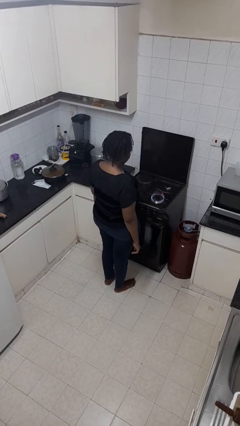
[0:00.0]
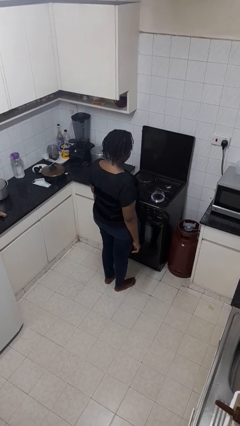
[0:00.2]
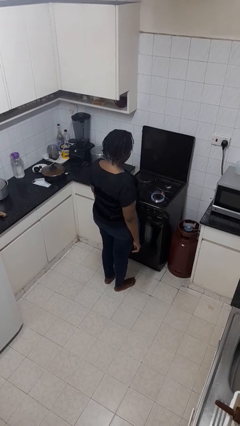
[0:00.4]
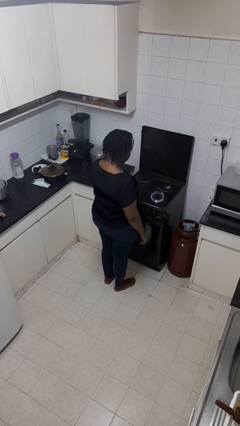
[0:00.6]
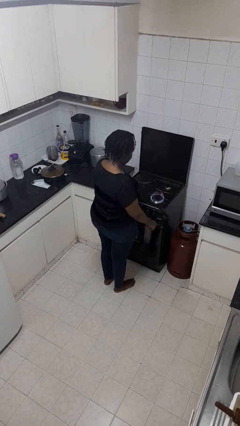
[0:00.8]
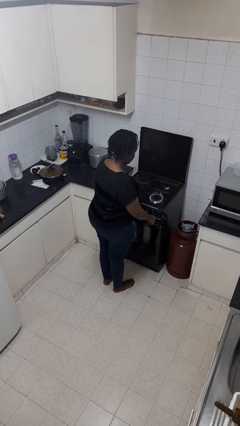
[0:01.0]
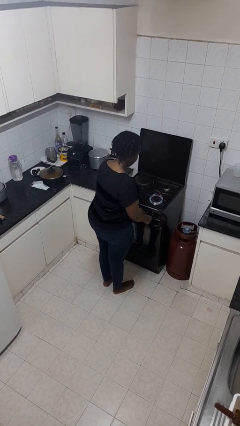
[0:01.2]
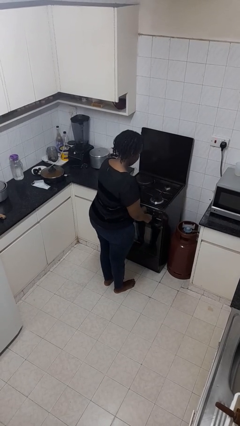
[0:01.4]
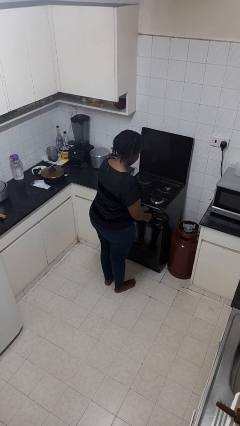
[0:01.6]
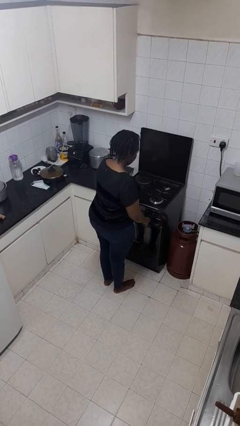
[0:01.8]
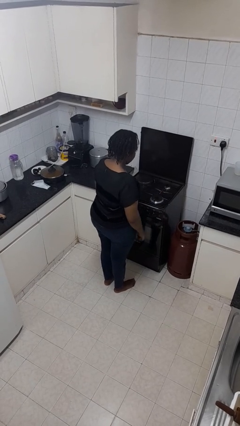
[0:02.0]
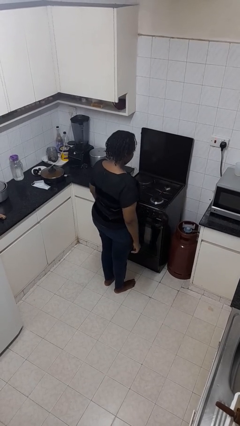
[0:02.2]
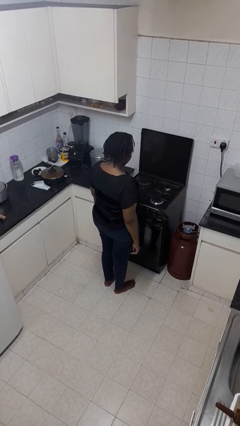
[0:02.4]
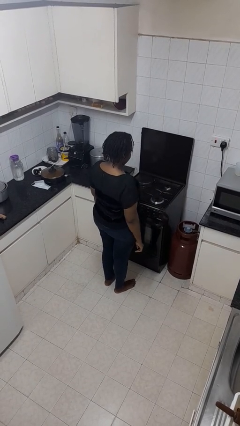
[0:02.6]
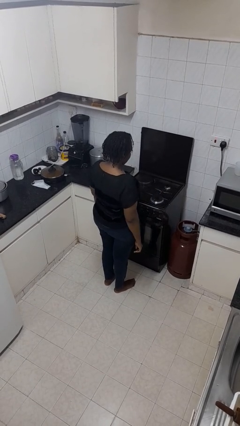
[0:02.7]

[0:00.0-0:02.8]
person turns off stovetop

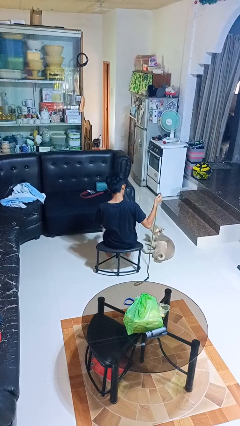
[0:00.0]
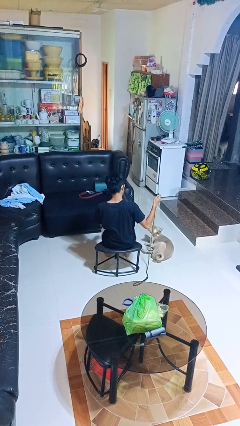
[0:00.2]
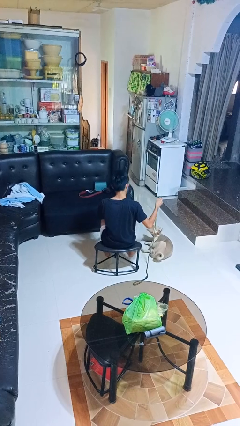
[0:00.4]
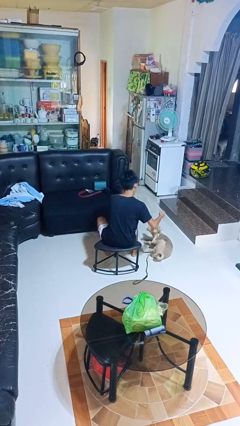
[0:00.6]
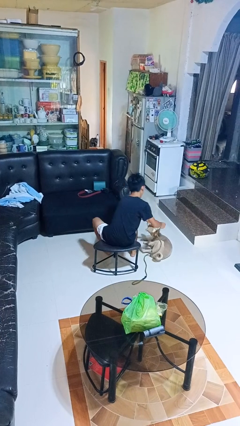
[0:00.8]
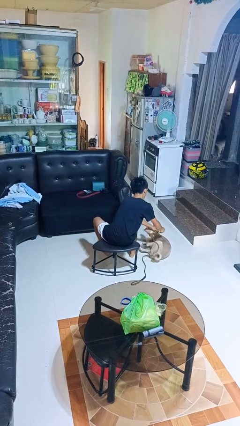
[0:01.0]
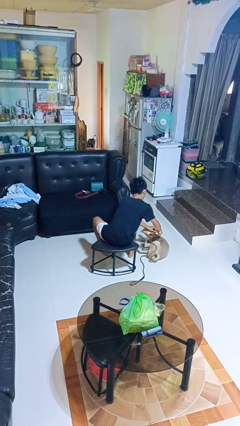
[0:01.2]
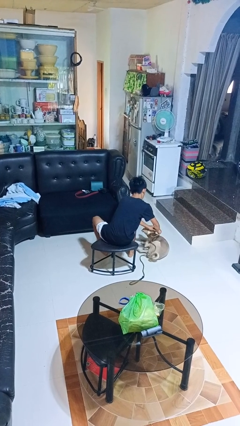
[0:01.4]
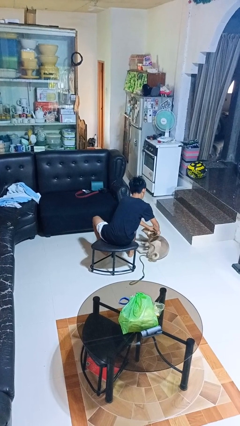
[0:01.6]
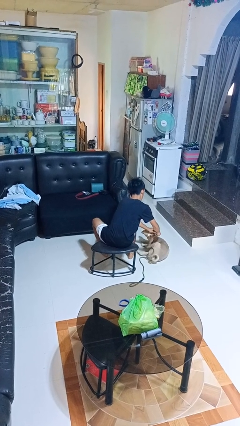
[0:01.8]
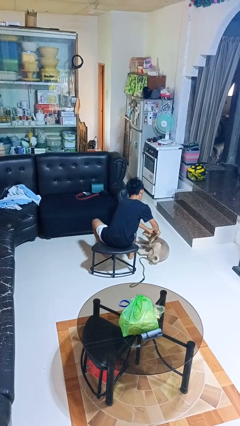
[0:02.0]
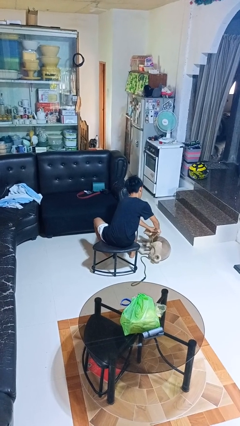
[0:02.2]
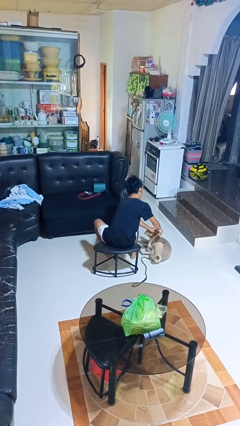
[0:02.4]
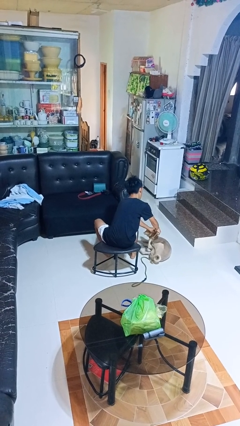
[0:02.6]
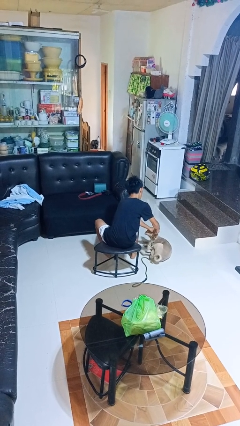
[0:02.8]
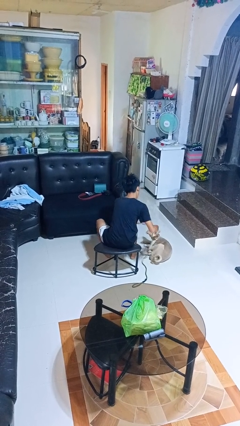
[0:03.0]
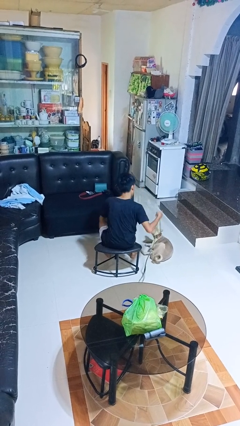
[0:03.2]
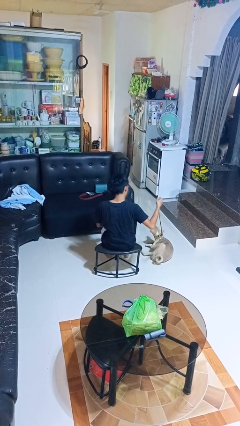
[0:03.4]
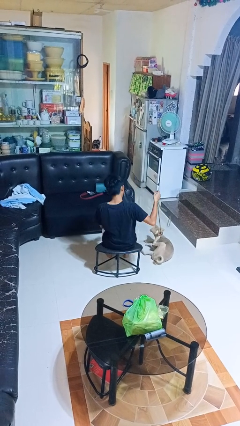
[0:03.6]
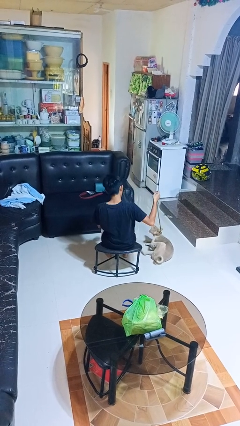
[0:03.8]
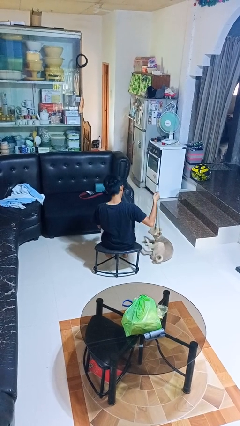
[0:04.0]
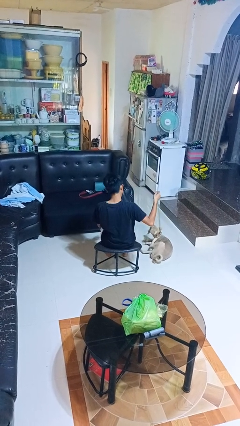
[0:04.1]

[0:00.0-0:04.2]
person attaches leash to dog

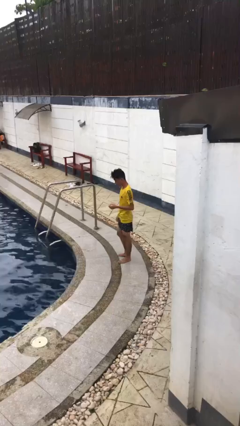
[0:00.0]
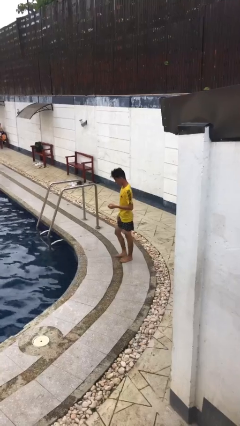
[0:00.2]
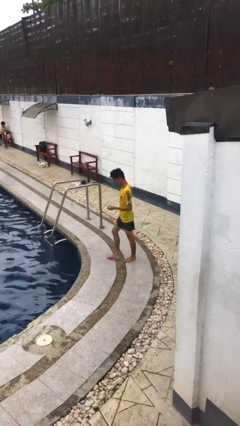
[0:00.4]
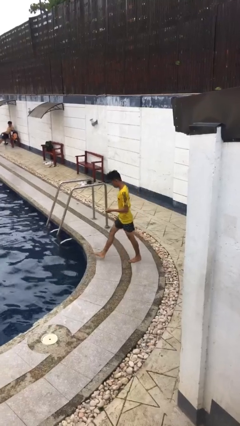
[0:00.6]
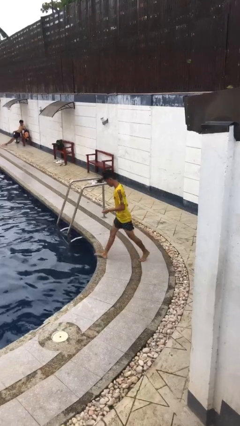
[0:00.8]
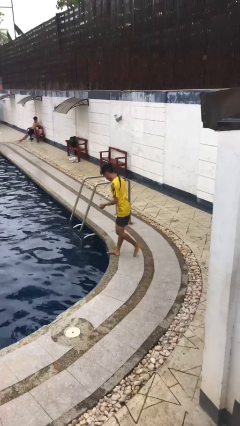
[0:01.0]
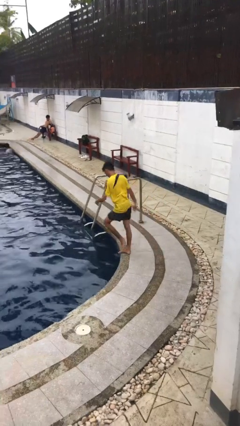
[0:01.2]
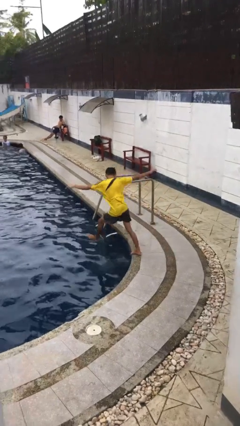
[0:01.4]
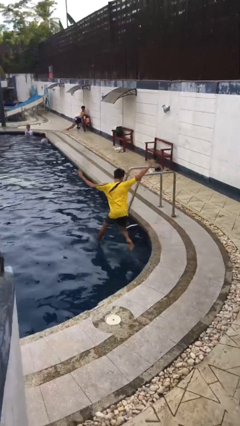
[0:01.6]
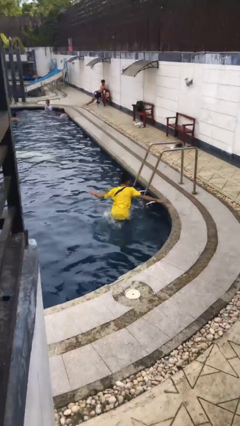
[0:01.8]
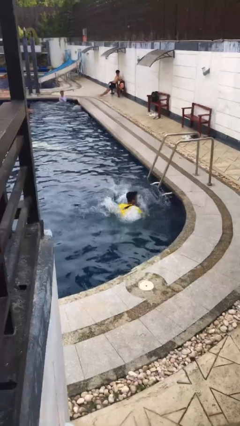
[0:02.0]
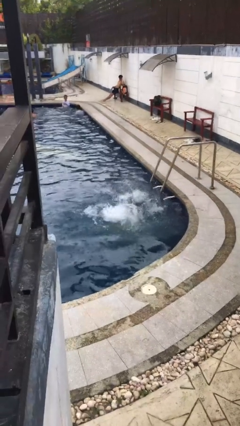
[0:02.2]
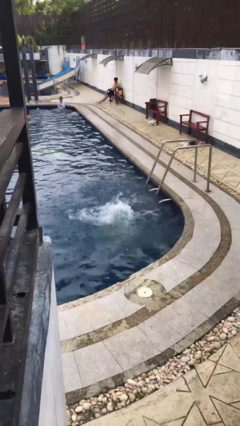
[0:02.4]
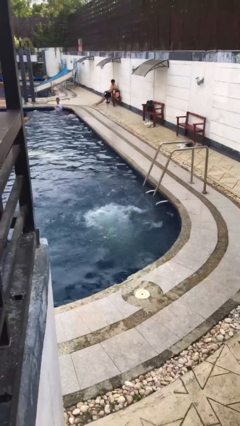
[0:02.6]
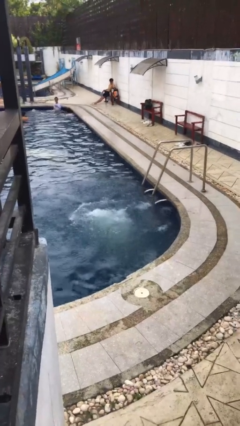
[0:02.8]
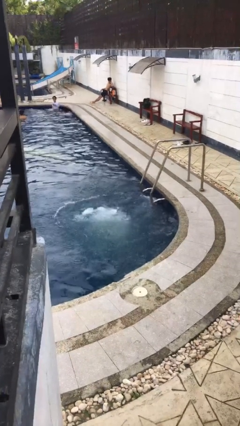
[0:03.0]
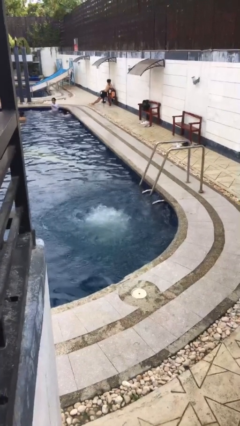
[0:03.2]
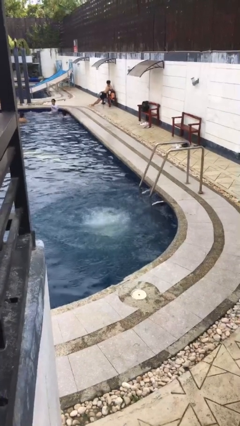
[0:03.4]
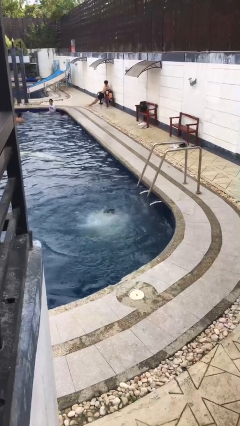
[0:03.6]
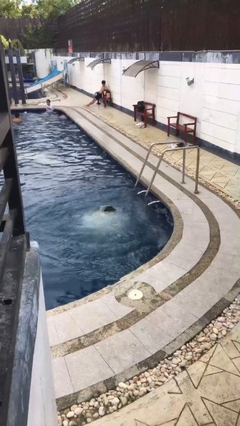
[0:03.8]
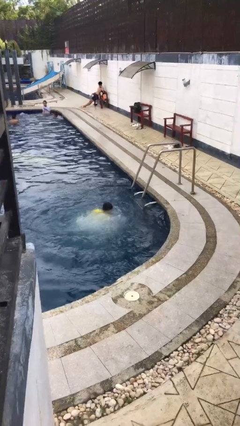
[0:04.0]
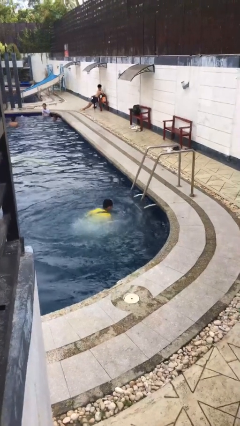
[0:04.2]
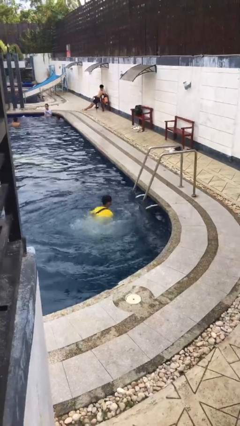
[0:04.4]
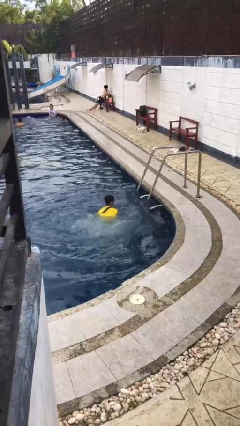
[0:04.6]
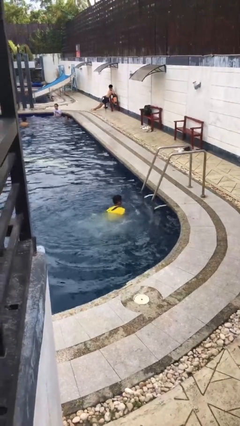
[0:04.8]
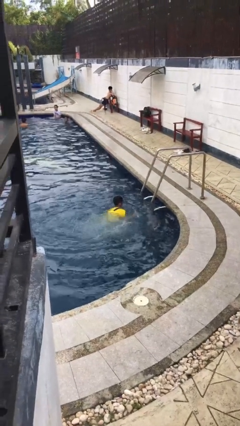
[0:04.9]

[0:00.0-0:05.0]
person falls into pool

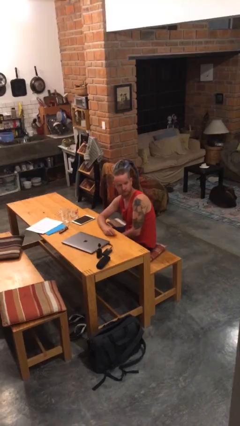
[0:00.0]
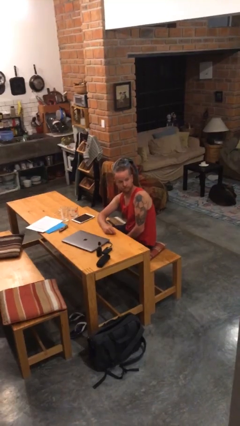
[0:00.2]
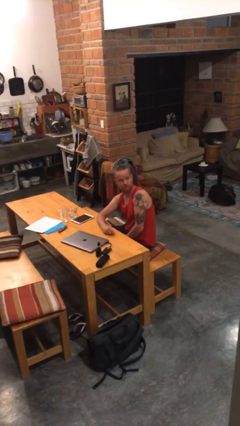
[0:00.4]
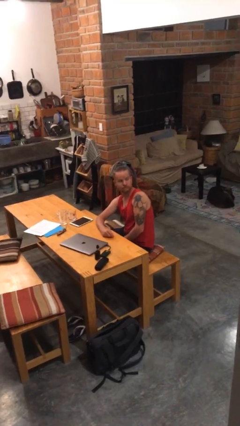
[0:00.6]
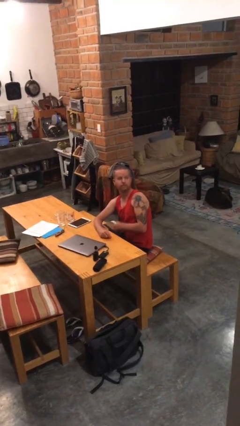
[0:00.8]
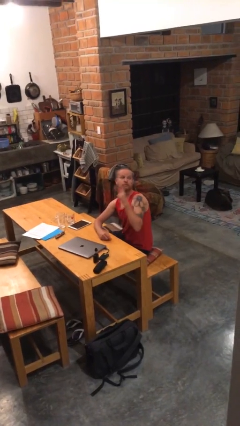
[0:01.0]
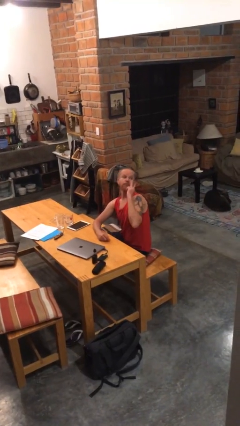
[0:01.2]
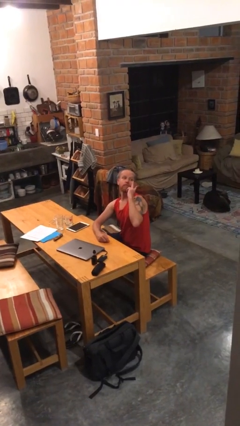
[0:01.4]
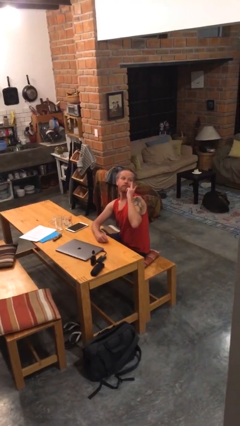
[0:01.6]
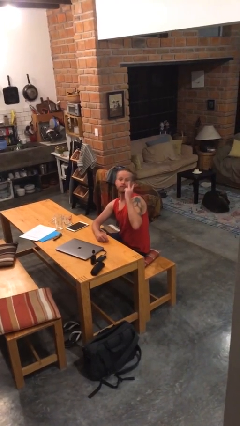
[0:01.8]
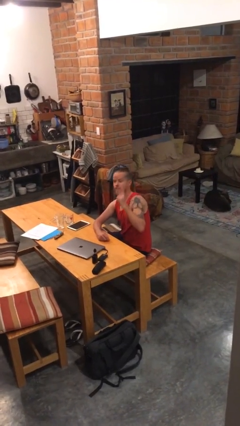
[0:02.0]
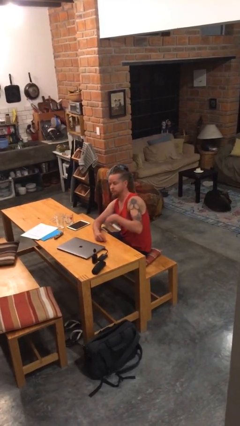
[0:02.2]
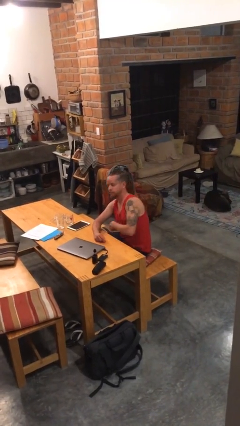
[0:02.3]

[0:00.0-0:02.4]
person gestures peace

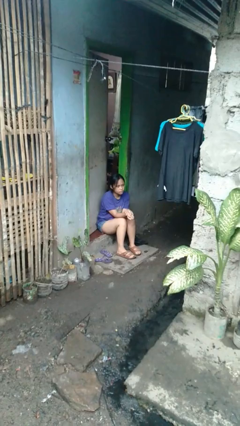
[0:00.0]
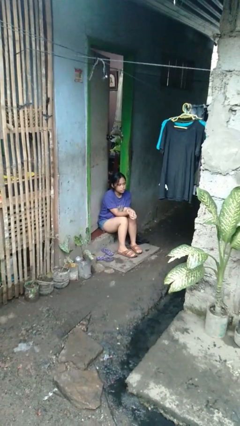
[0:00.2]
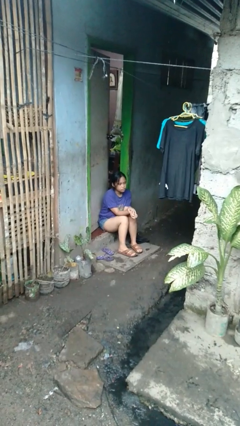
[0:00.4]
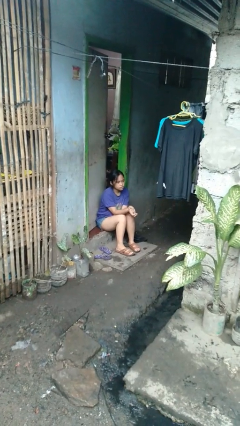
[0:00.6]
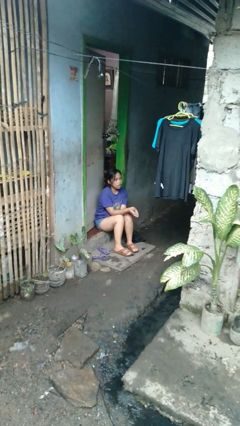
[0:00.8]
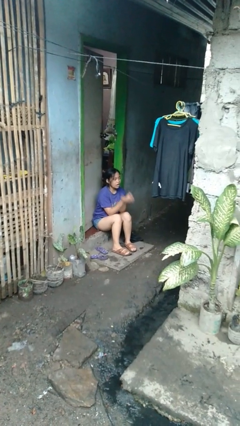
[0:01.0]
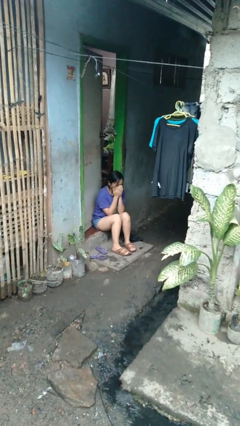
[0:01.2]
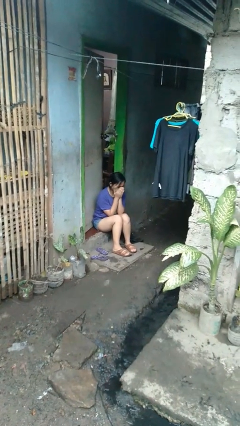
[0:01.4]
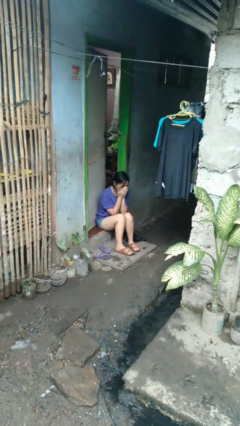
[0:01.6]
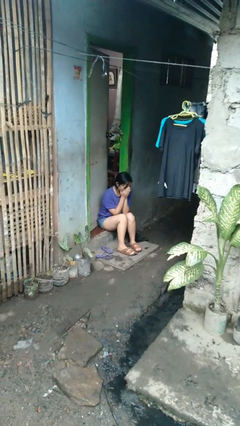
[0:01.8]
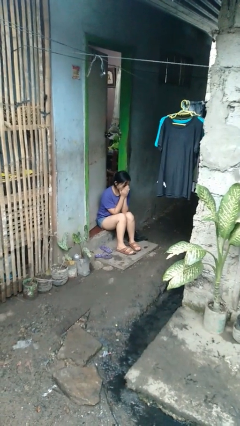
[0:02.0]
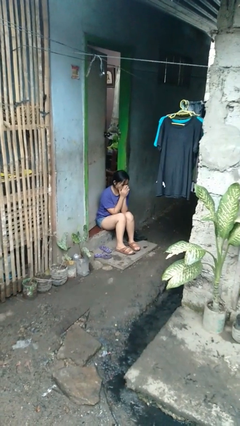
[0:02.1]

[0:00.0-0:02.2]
person sneezes into hand

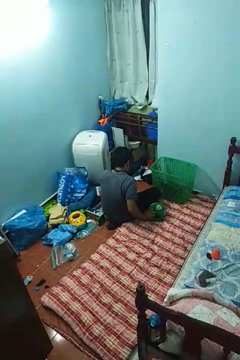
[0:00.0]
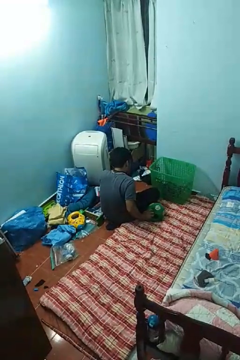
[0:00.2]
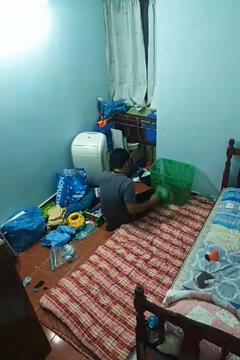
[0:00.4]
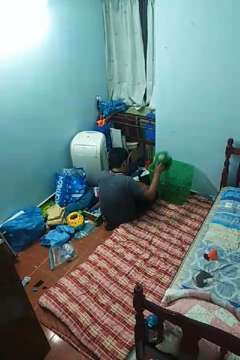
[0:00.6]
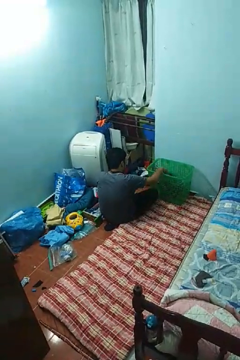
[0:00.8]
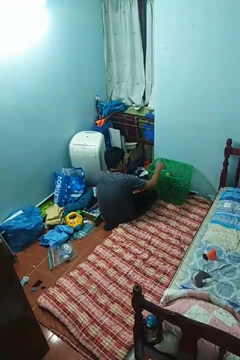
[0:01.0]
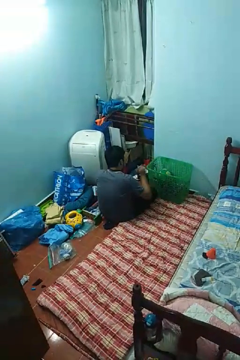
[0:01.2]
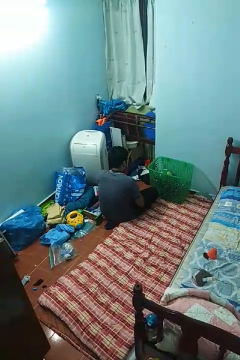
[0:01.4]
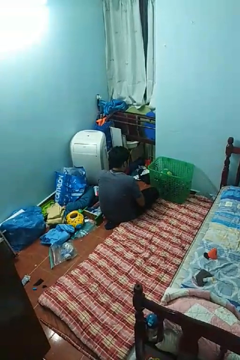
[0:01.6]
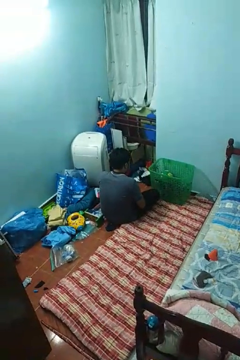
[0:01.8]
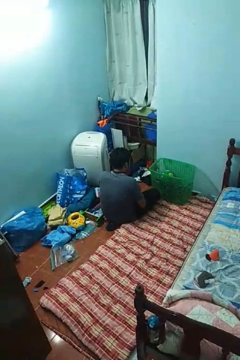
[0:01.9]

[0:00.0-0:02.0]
person puts object into basket
